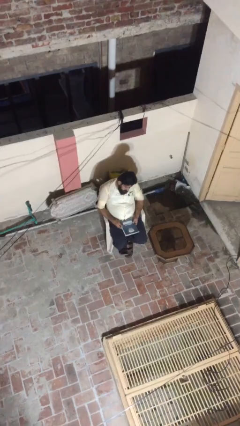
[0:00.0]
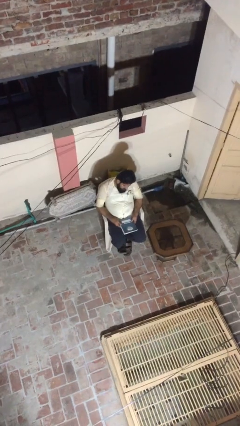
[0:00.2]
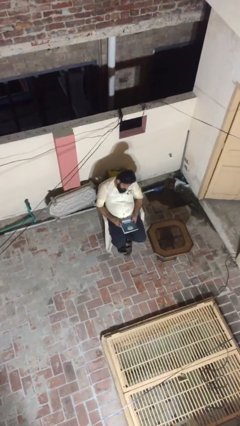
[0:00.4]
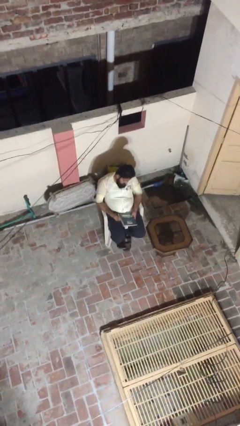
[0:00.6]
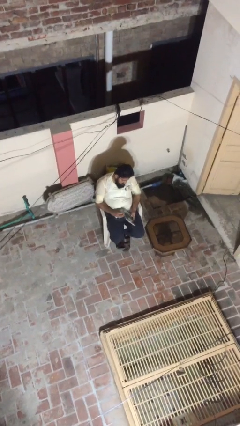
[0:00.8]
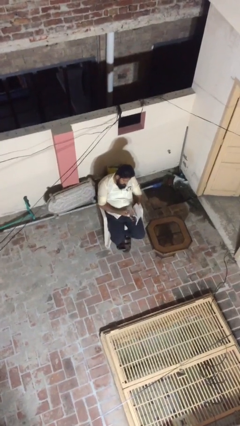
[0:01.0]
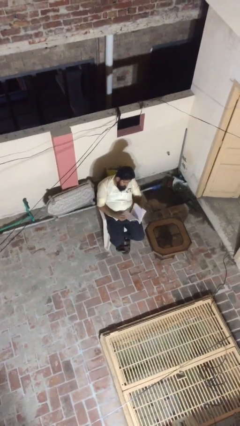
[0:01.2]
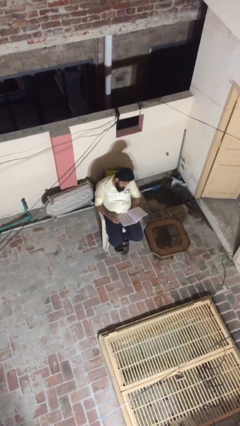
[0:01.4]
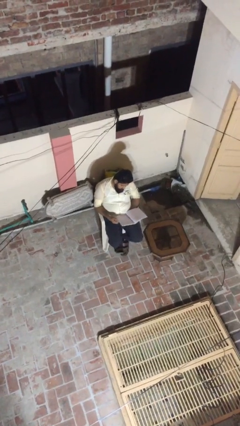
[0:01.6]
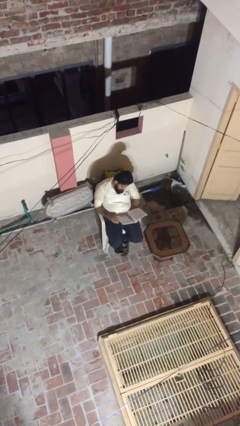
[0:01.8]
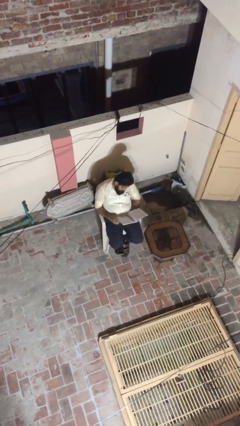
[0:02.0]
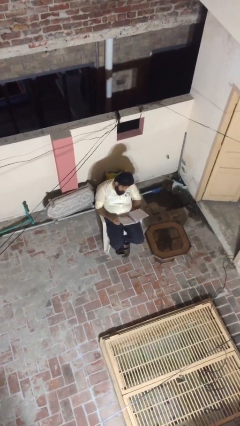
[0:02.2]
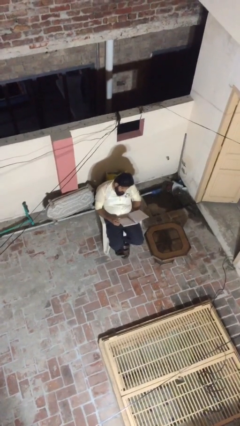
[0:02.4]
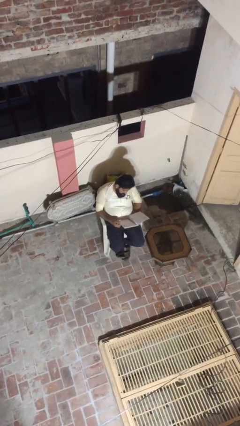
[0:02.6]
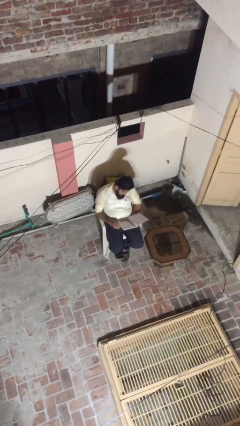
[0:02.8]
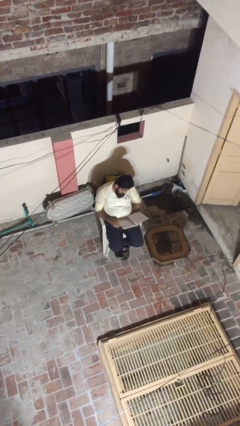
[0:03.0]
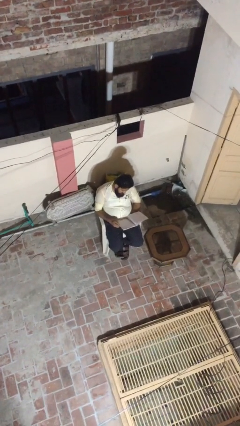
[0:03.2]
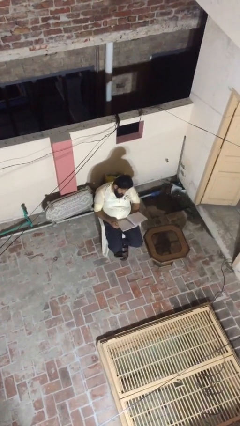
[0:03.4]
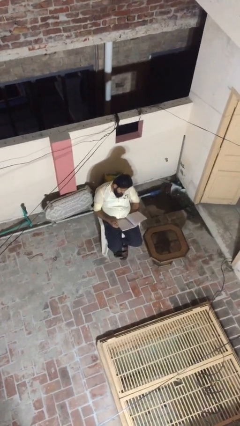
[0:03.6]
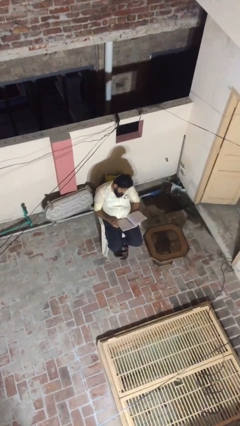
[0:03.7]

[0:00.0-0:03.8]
person reads document

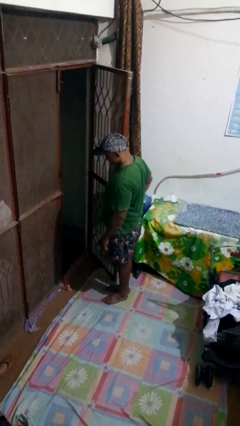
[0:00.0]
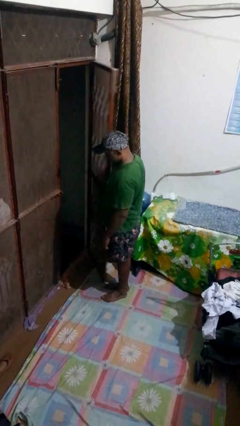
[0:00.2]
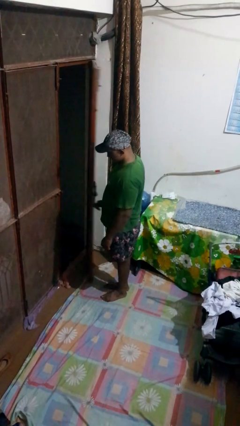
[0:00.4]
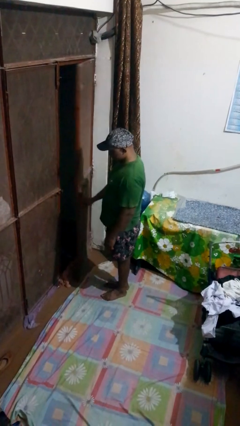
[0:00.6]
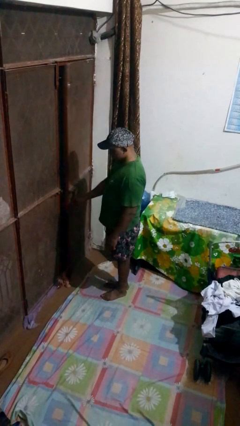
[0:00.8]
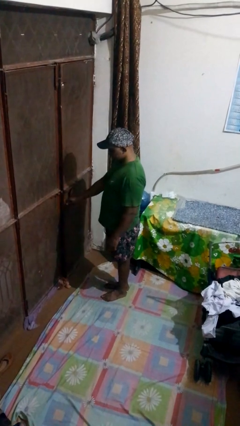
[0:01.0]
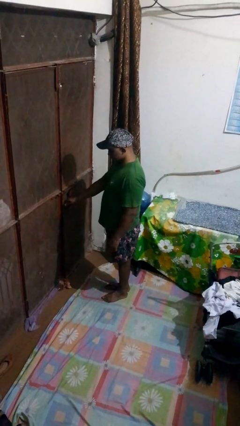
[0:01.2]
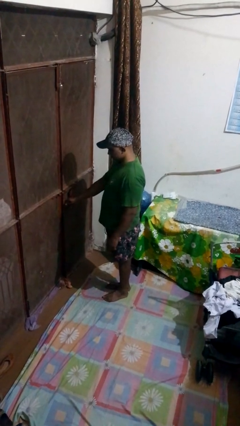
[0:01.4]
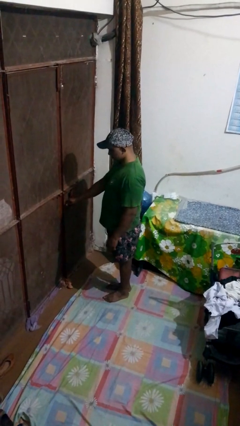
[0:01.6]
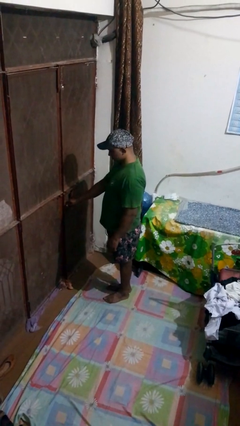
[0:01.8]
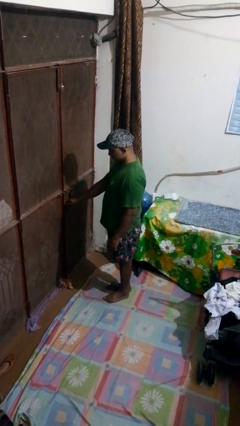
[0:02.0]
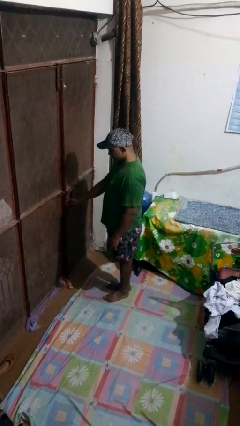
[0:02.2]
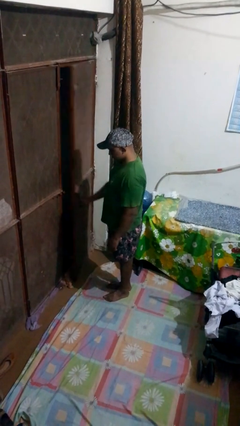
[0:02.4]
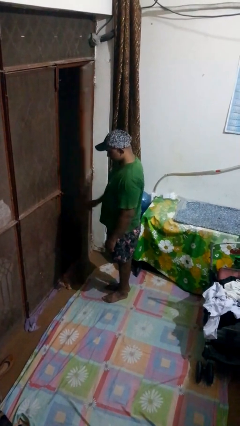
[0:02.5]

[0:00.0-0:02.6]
person closes gate

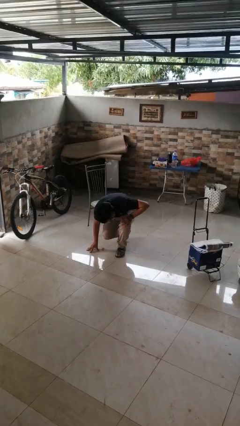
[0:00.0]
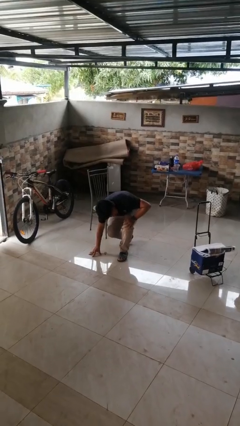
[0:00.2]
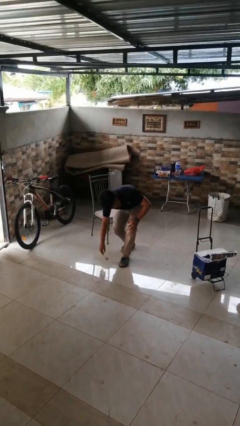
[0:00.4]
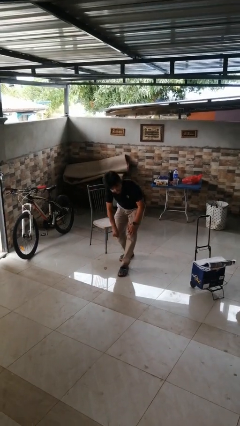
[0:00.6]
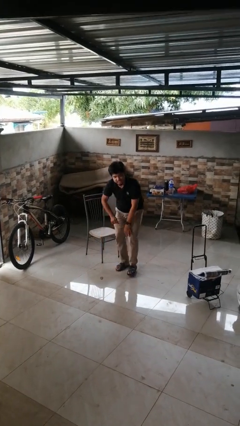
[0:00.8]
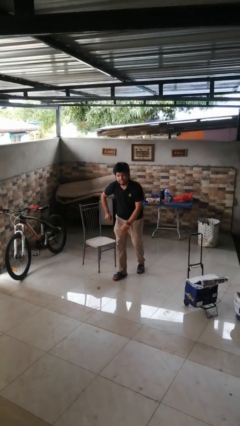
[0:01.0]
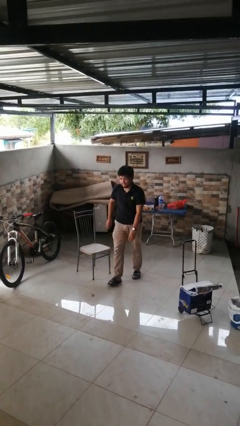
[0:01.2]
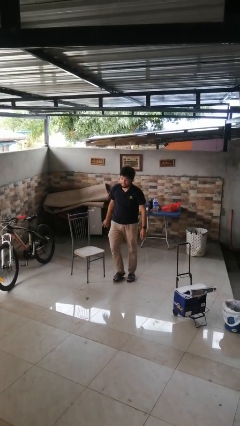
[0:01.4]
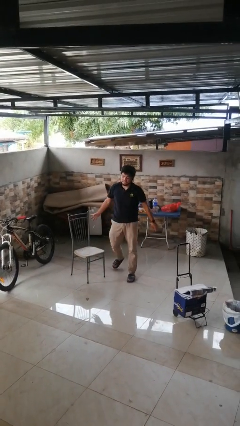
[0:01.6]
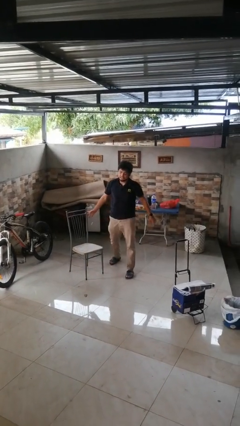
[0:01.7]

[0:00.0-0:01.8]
person stands up from floor

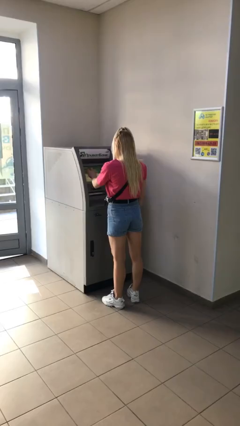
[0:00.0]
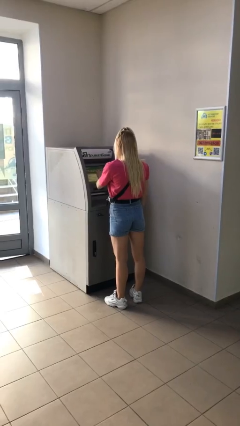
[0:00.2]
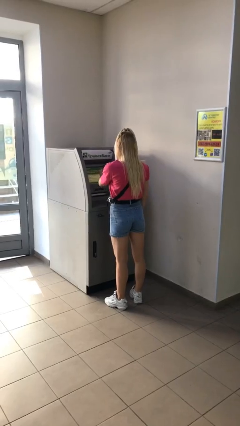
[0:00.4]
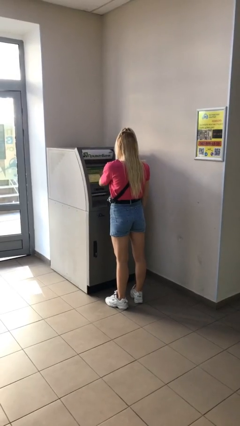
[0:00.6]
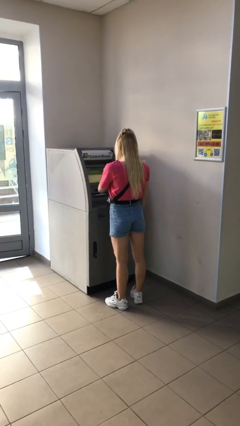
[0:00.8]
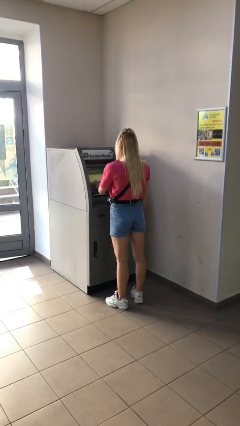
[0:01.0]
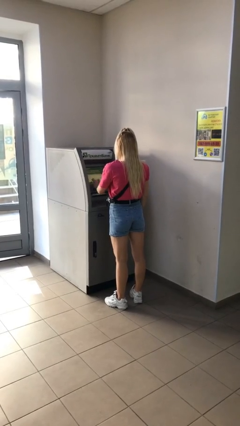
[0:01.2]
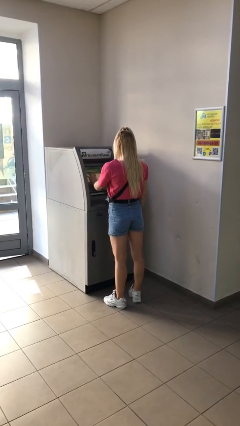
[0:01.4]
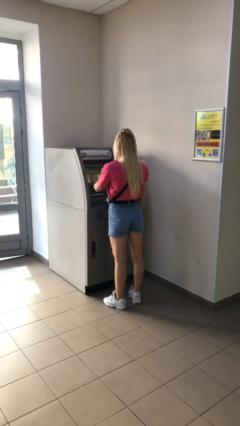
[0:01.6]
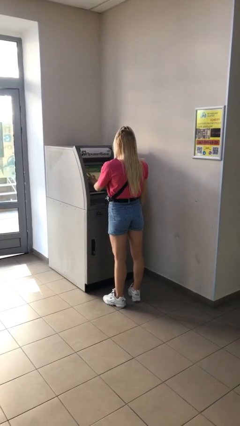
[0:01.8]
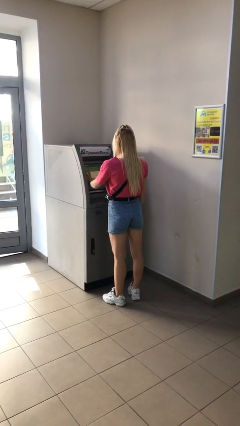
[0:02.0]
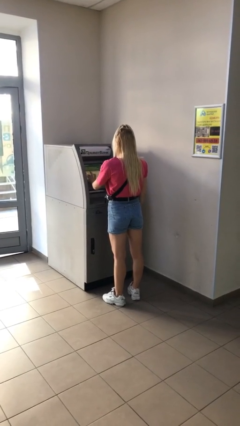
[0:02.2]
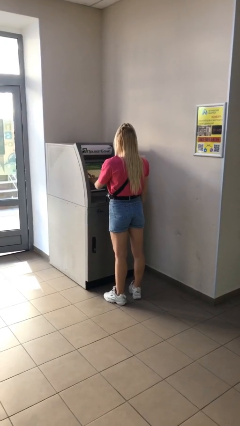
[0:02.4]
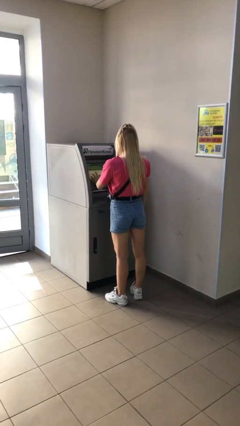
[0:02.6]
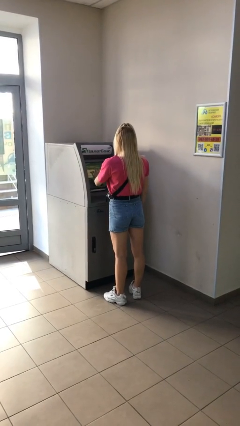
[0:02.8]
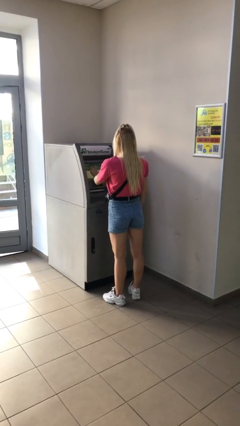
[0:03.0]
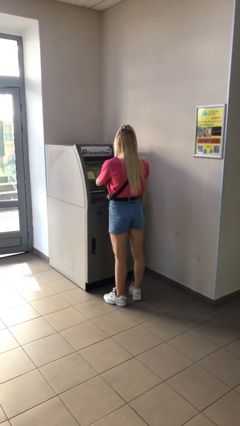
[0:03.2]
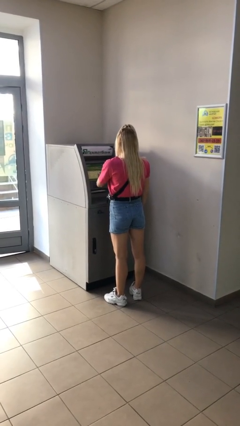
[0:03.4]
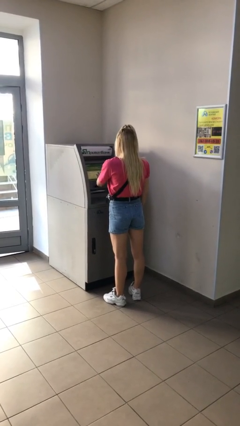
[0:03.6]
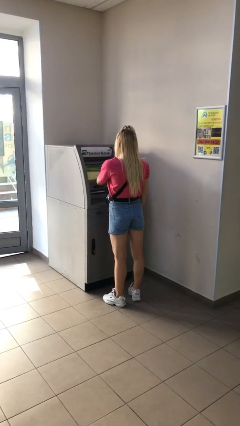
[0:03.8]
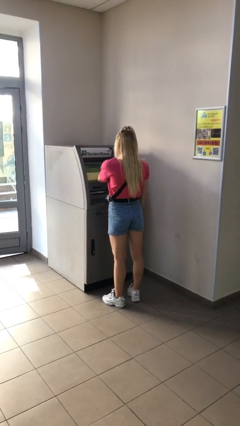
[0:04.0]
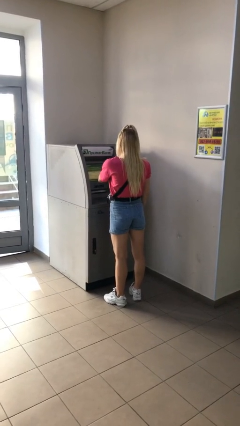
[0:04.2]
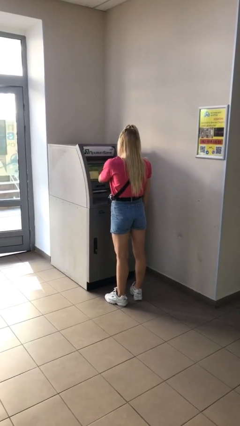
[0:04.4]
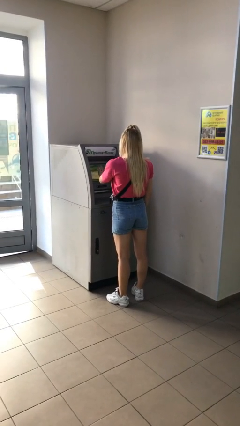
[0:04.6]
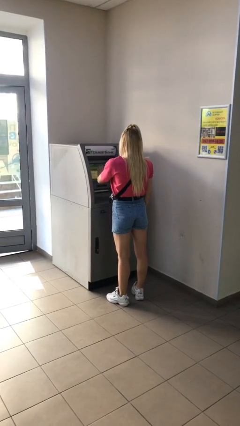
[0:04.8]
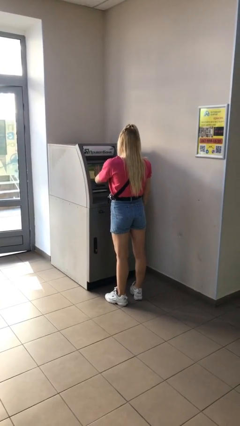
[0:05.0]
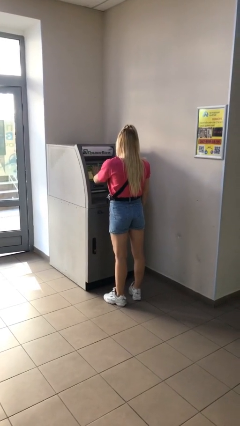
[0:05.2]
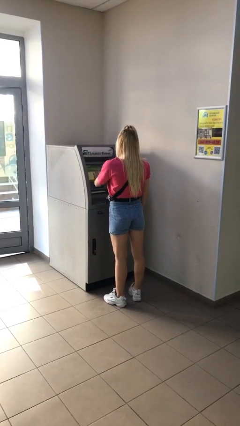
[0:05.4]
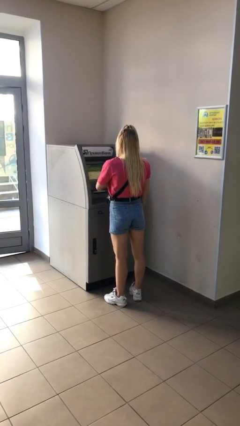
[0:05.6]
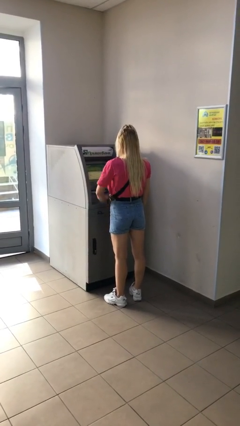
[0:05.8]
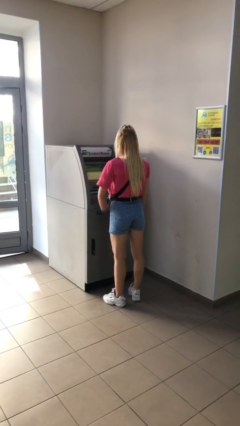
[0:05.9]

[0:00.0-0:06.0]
person purchases from machine

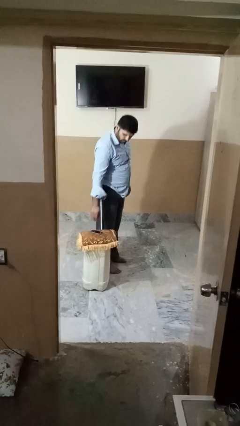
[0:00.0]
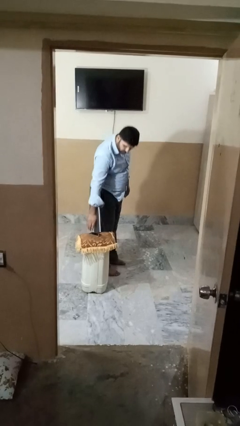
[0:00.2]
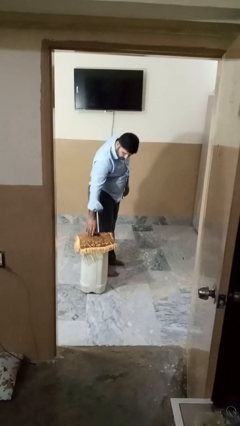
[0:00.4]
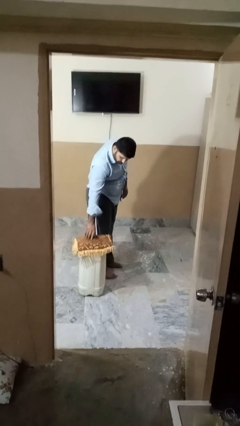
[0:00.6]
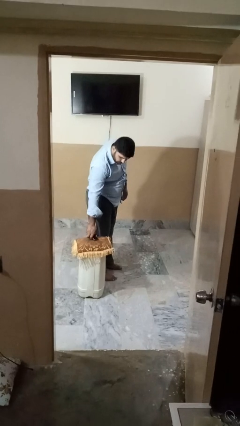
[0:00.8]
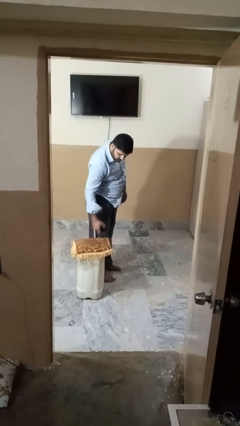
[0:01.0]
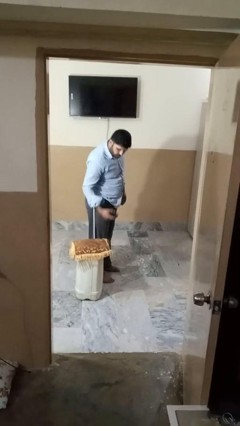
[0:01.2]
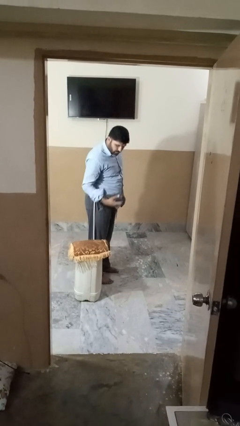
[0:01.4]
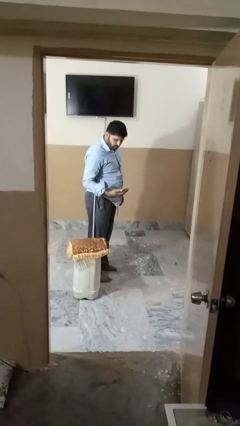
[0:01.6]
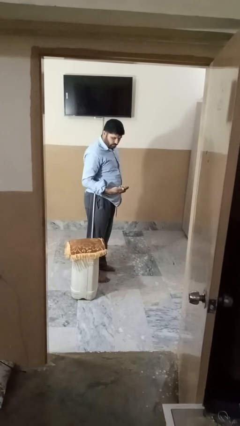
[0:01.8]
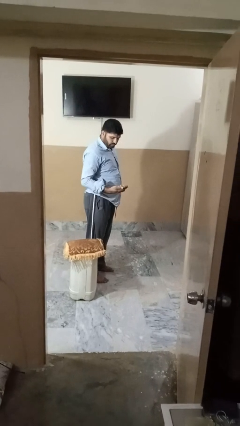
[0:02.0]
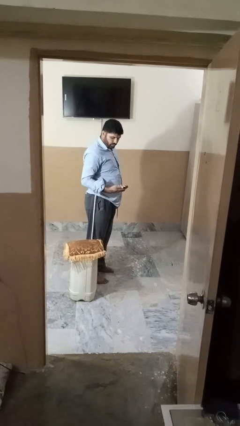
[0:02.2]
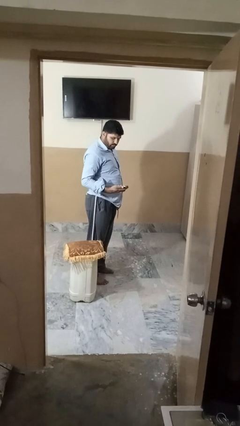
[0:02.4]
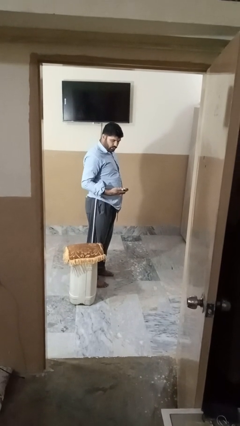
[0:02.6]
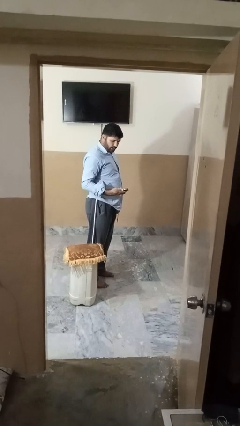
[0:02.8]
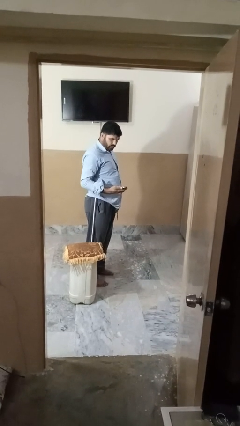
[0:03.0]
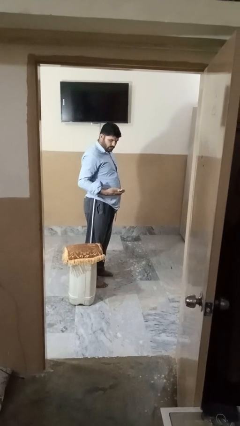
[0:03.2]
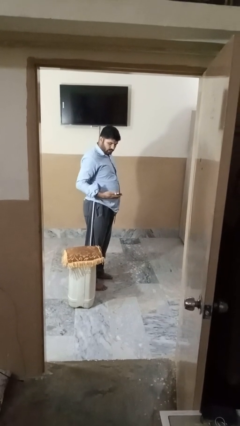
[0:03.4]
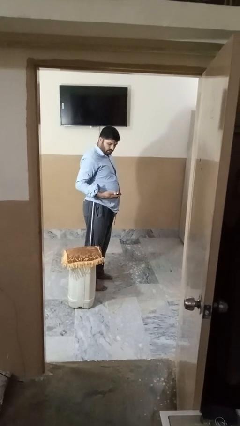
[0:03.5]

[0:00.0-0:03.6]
person takes phone from pocket
